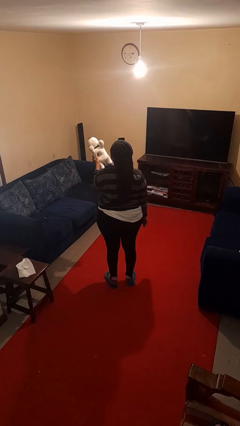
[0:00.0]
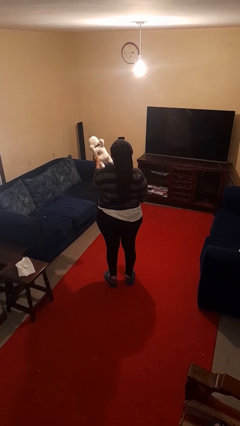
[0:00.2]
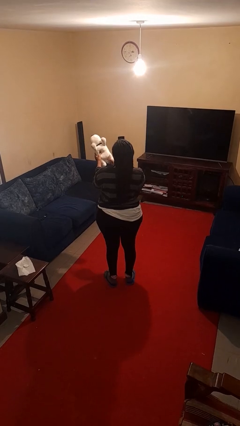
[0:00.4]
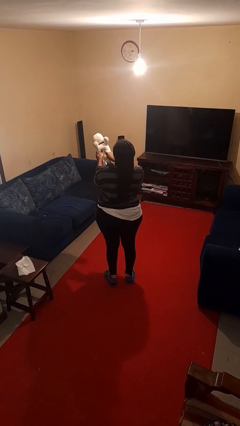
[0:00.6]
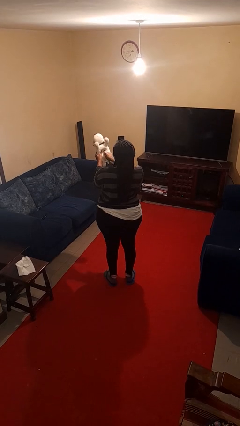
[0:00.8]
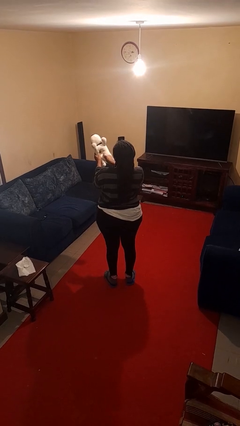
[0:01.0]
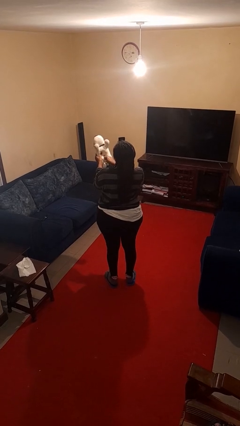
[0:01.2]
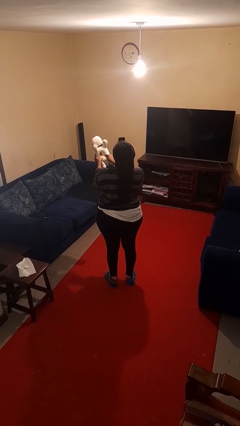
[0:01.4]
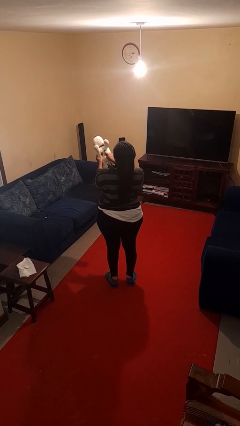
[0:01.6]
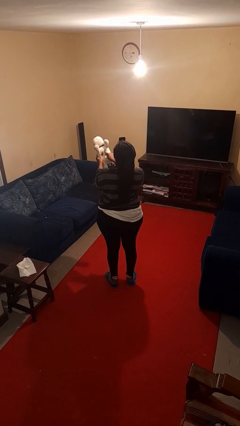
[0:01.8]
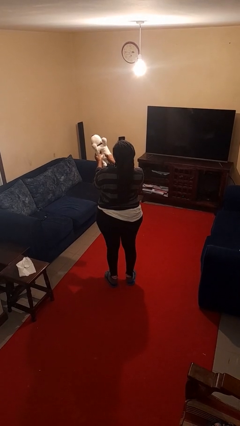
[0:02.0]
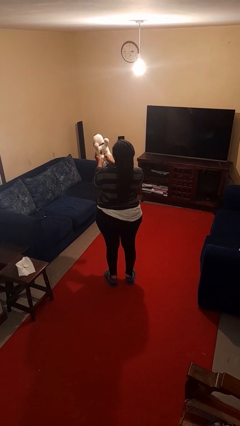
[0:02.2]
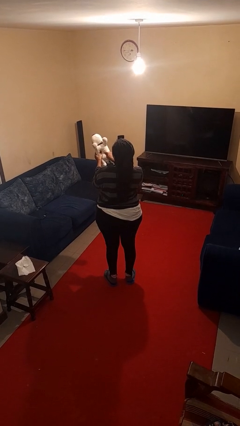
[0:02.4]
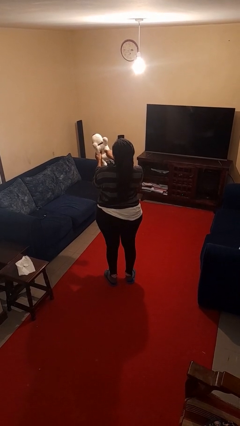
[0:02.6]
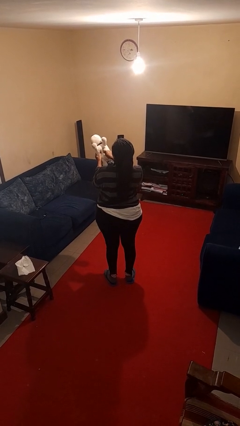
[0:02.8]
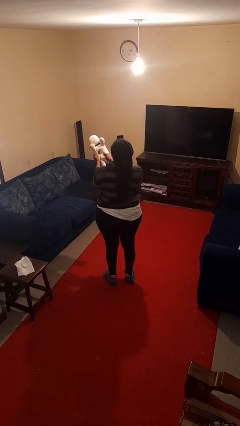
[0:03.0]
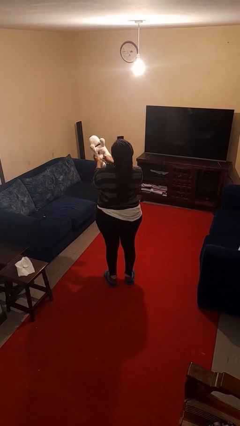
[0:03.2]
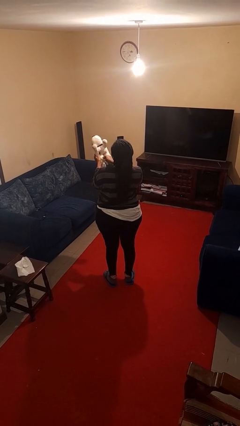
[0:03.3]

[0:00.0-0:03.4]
person taps object with finger

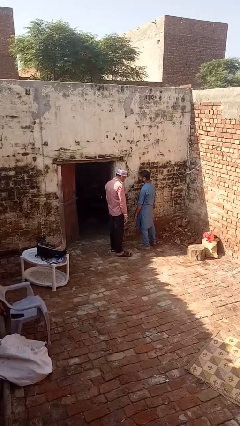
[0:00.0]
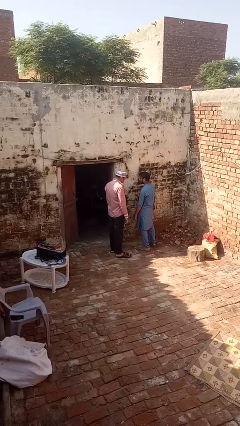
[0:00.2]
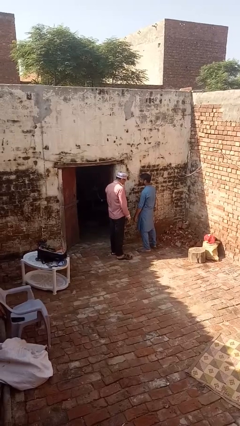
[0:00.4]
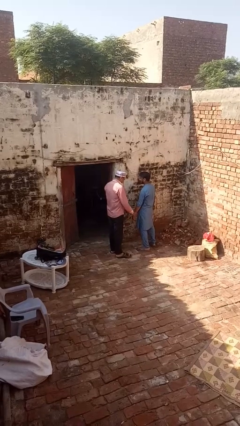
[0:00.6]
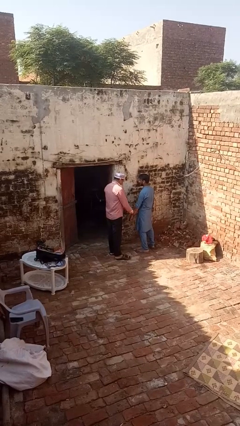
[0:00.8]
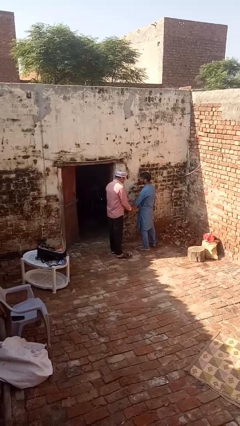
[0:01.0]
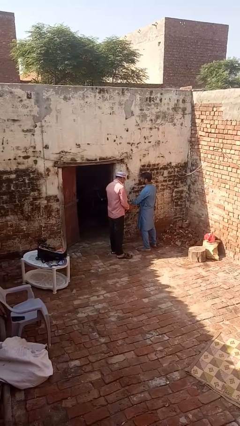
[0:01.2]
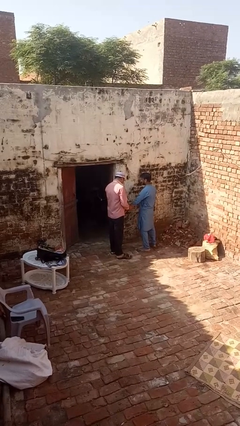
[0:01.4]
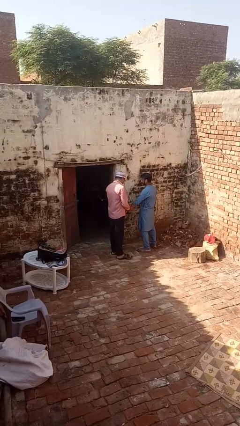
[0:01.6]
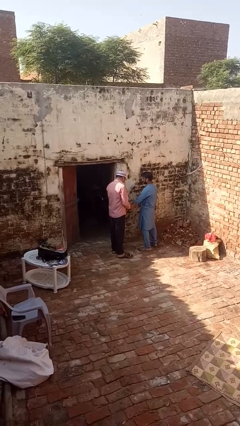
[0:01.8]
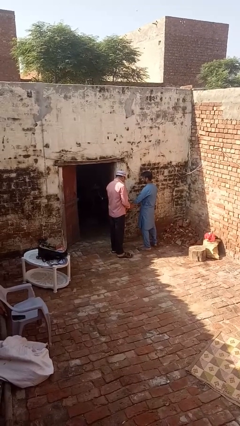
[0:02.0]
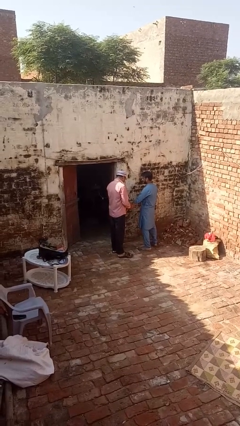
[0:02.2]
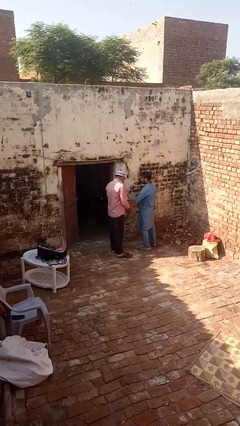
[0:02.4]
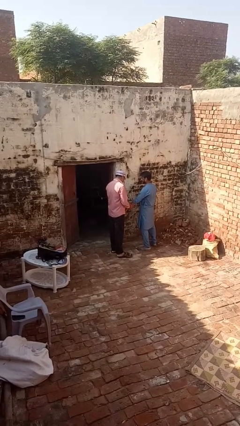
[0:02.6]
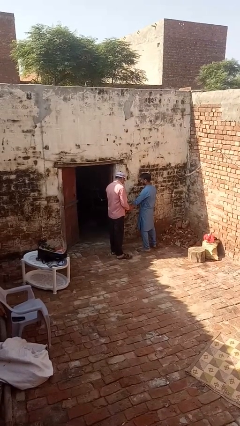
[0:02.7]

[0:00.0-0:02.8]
person grabs person by forearm

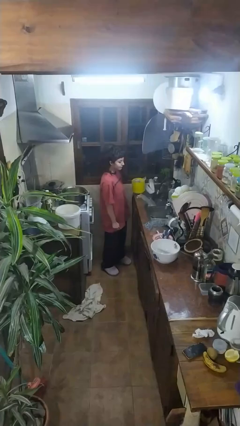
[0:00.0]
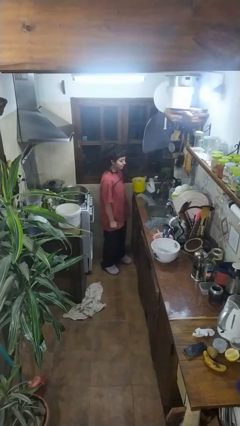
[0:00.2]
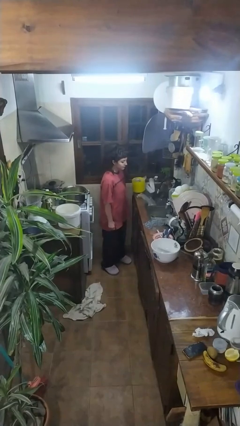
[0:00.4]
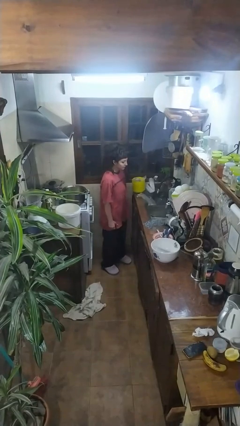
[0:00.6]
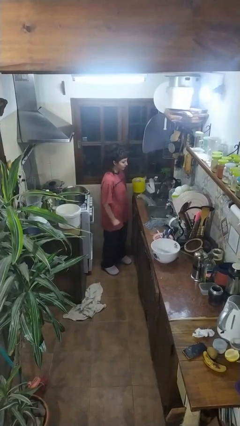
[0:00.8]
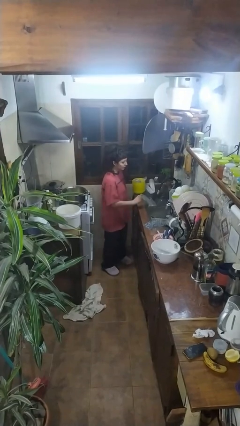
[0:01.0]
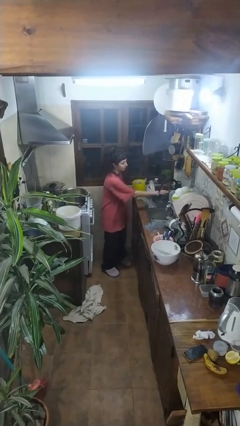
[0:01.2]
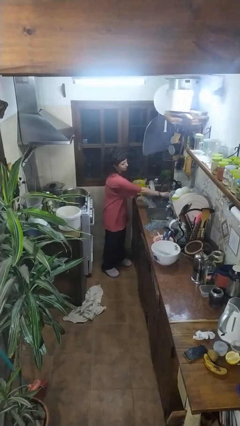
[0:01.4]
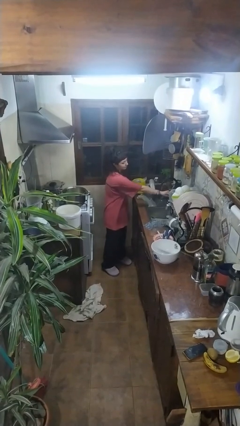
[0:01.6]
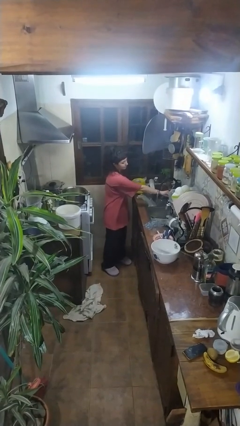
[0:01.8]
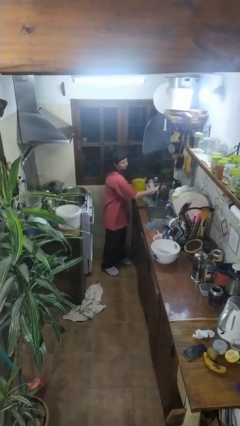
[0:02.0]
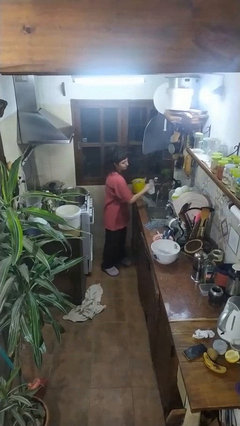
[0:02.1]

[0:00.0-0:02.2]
person turns on faucet

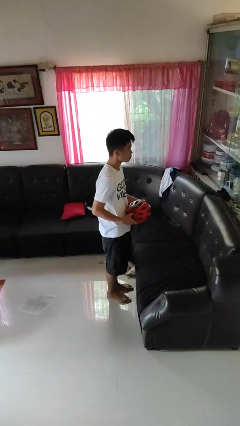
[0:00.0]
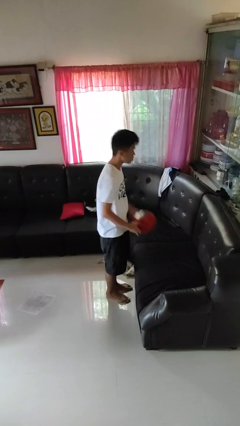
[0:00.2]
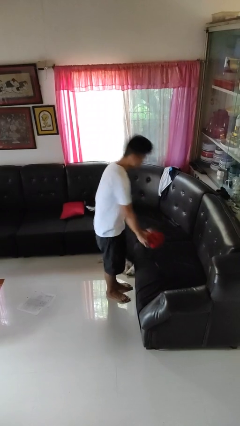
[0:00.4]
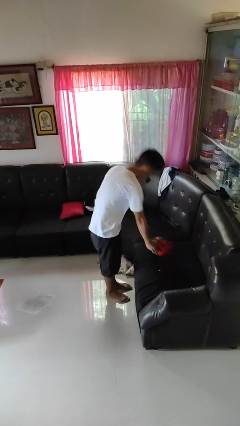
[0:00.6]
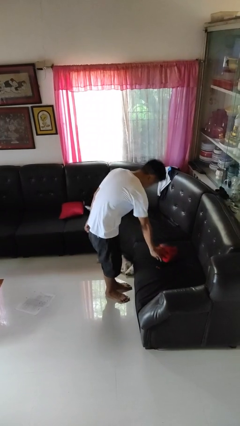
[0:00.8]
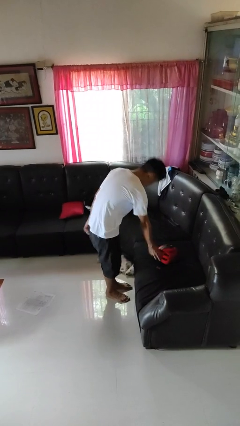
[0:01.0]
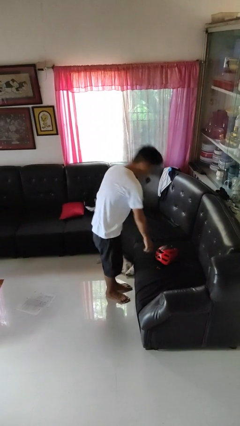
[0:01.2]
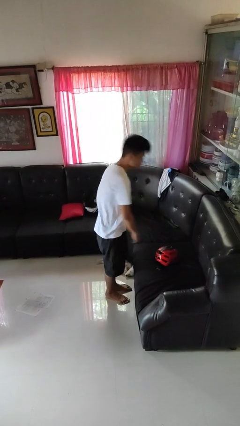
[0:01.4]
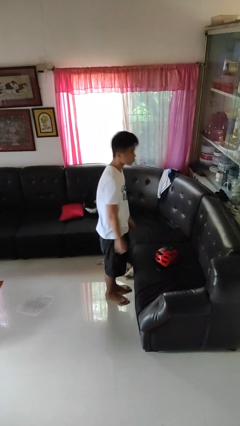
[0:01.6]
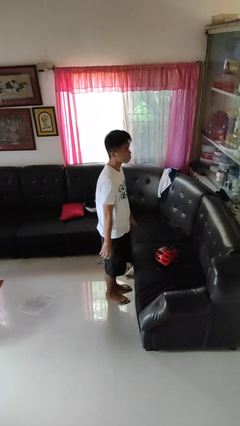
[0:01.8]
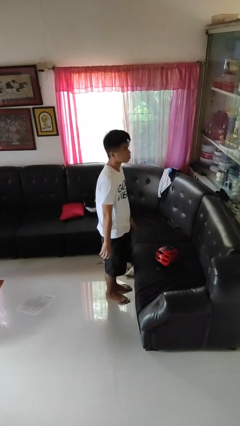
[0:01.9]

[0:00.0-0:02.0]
person puts down object on couch

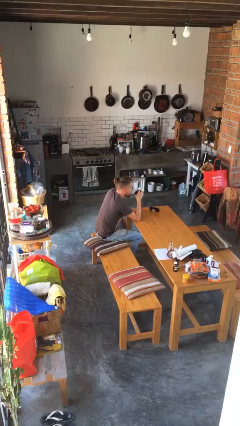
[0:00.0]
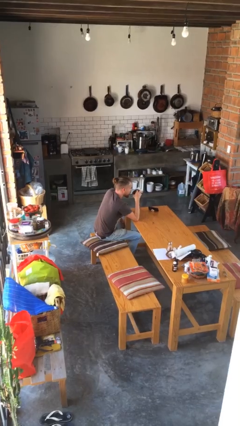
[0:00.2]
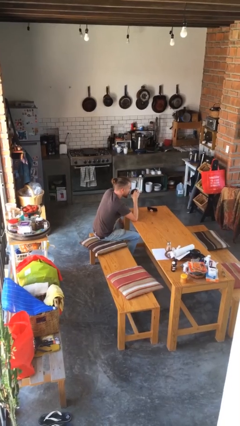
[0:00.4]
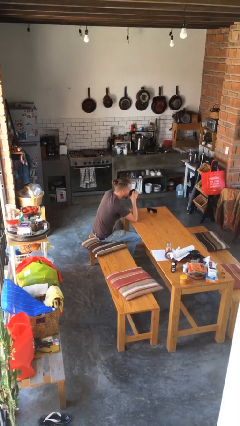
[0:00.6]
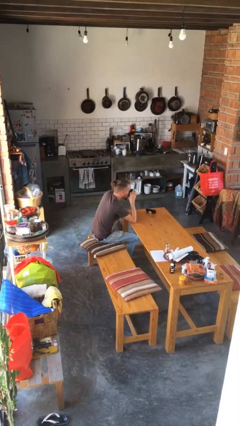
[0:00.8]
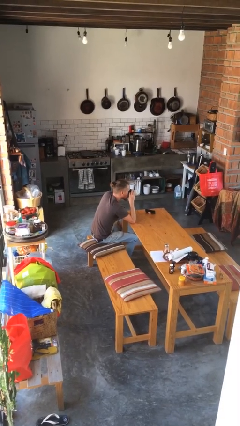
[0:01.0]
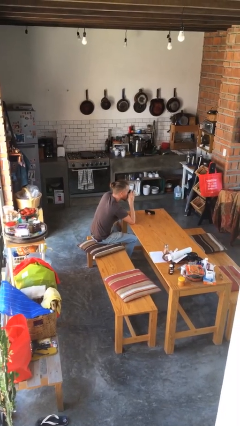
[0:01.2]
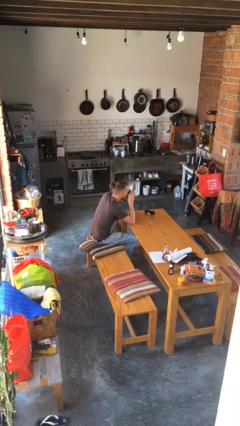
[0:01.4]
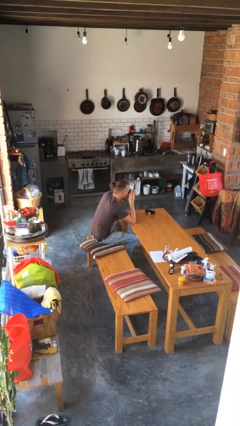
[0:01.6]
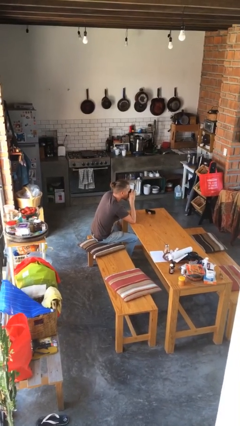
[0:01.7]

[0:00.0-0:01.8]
person drinks from mug

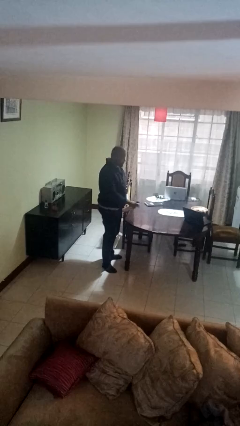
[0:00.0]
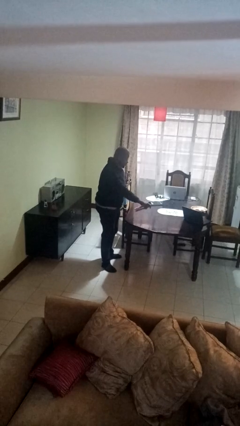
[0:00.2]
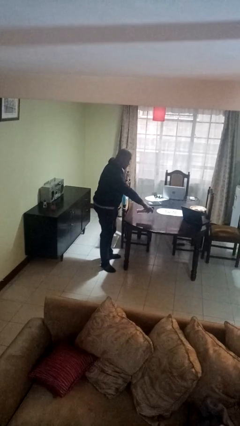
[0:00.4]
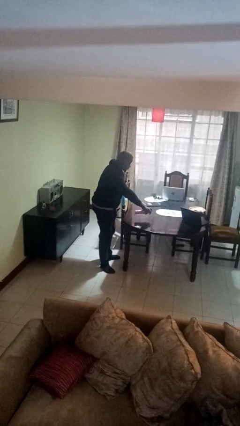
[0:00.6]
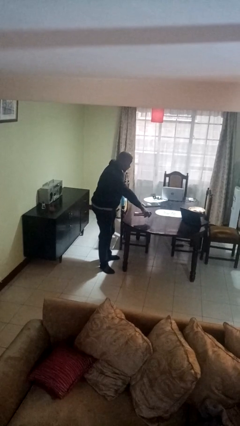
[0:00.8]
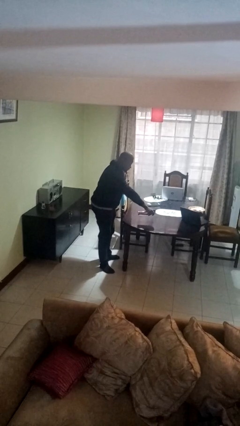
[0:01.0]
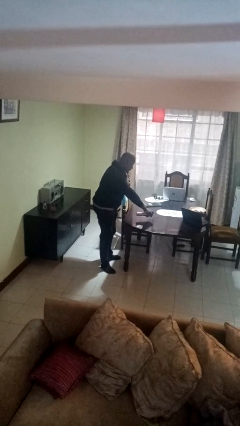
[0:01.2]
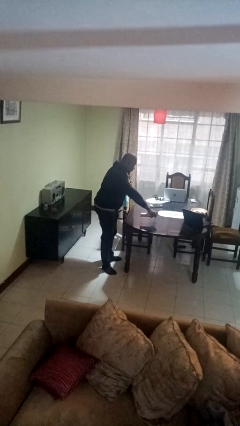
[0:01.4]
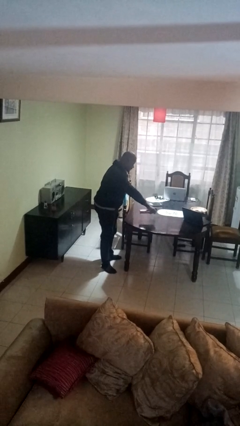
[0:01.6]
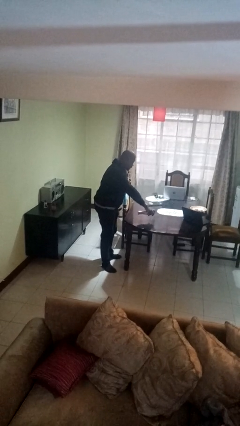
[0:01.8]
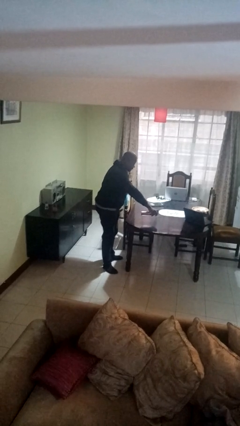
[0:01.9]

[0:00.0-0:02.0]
person sprays from bottle

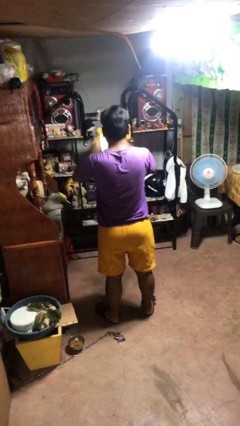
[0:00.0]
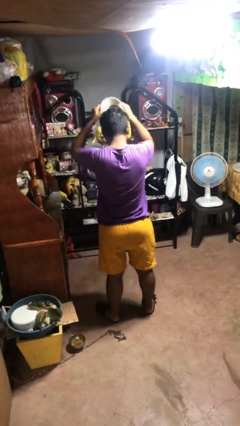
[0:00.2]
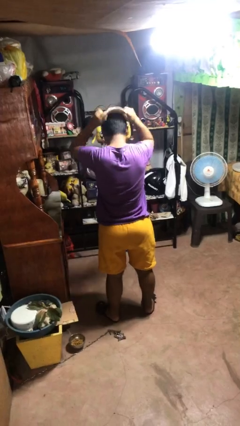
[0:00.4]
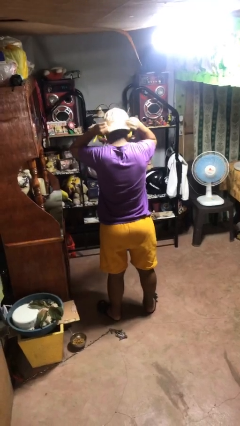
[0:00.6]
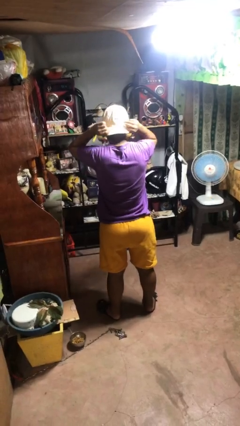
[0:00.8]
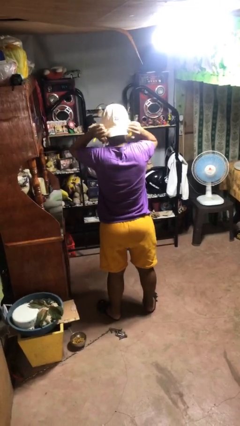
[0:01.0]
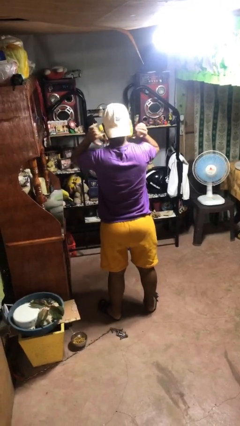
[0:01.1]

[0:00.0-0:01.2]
person puts on hat

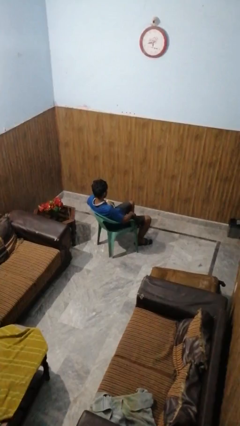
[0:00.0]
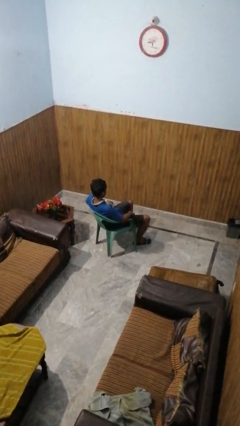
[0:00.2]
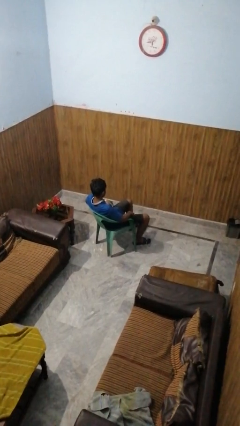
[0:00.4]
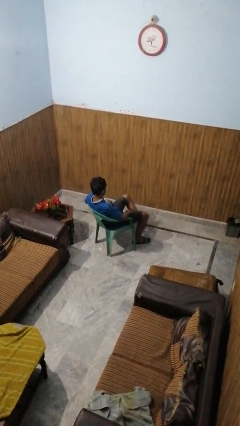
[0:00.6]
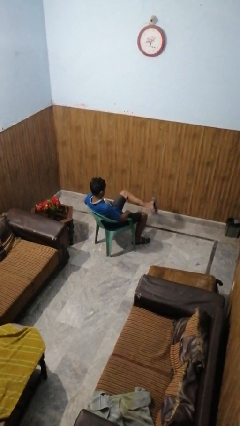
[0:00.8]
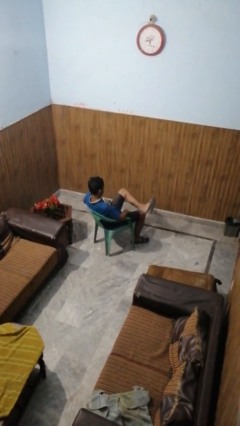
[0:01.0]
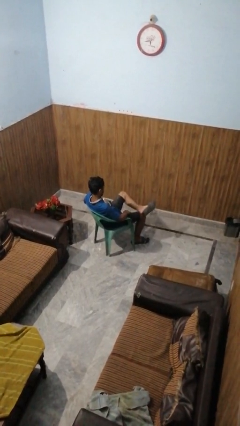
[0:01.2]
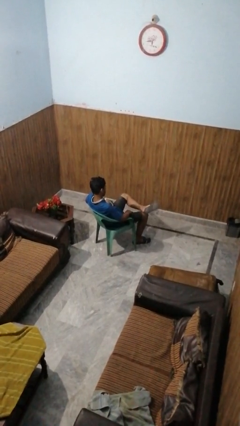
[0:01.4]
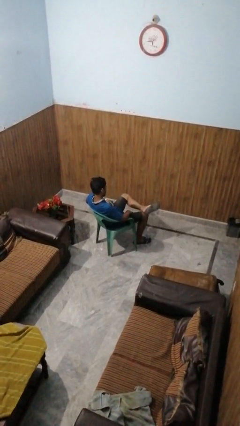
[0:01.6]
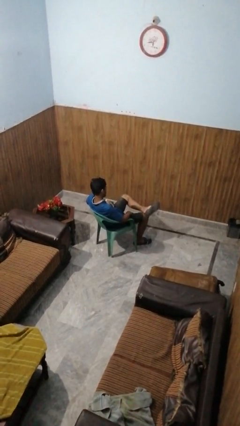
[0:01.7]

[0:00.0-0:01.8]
person crosses legs
